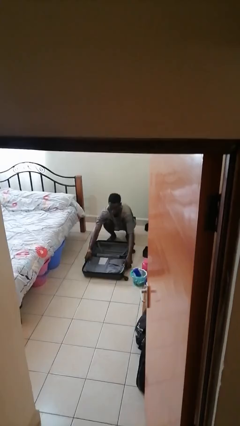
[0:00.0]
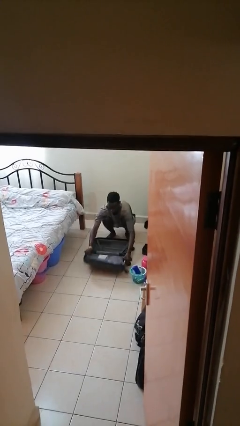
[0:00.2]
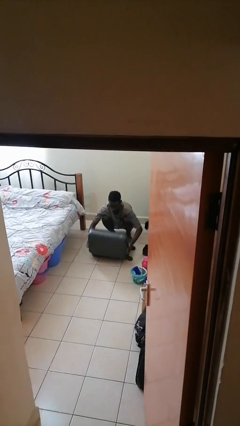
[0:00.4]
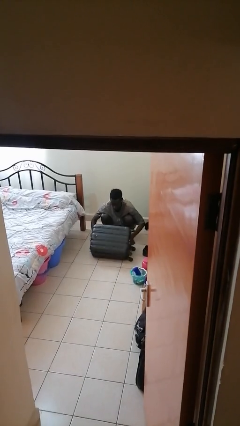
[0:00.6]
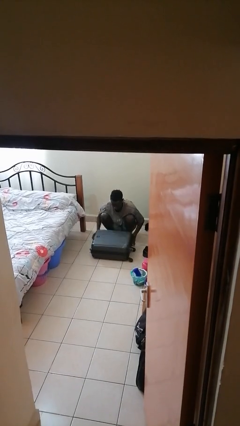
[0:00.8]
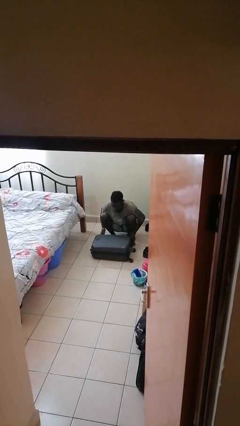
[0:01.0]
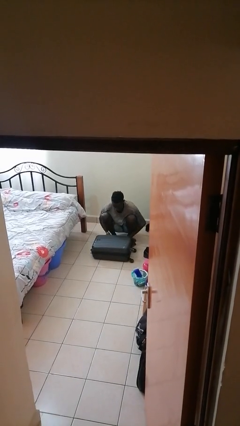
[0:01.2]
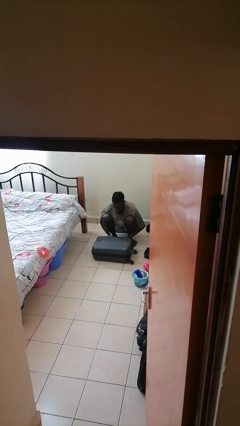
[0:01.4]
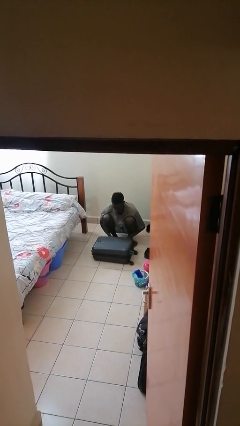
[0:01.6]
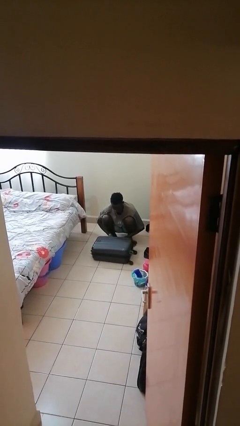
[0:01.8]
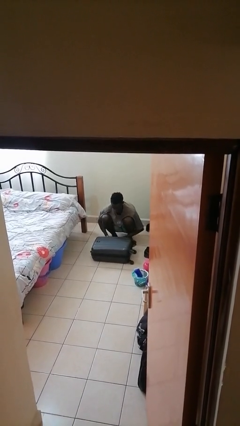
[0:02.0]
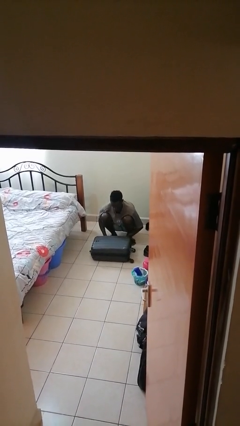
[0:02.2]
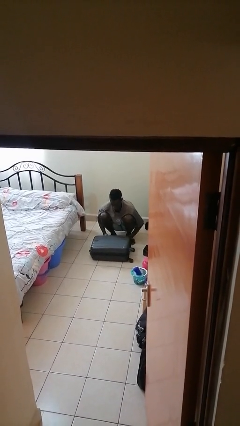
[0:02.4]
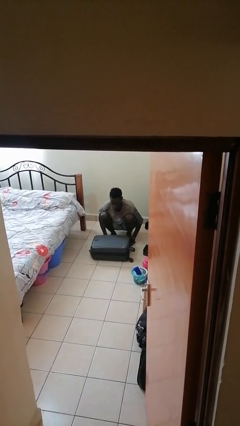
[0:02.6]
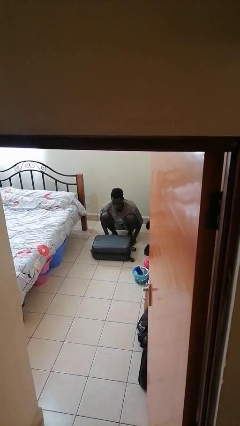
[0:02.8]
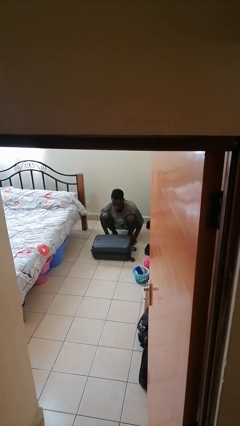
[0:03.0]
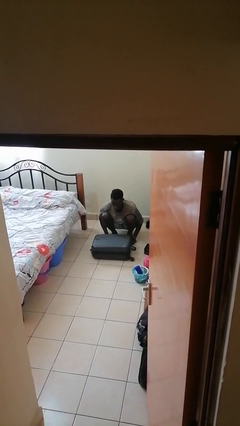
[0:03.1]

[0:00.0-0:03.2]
person closes suitcase

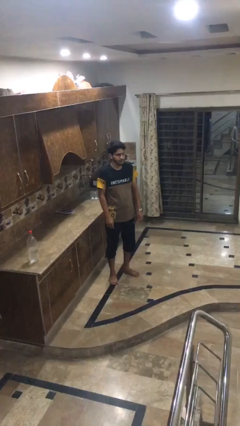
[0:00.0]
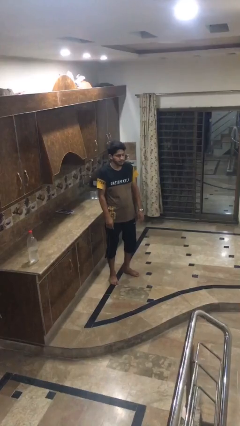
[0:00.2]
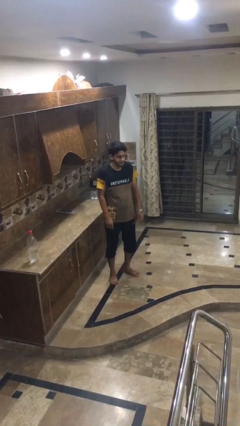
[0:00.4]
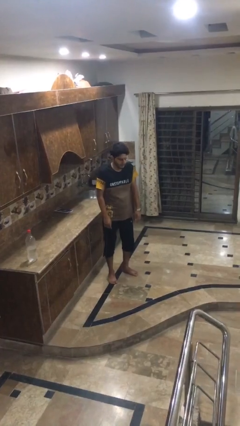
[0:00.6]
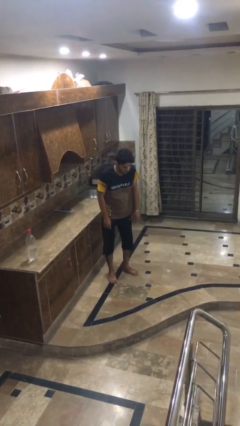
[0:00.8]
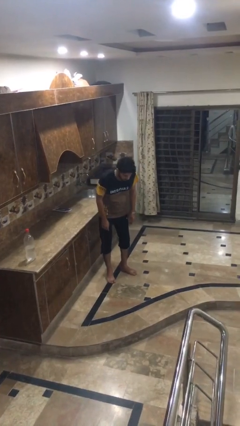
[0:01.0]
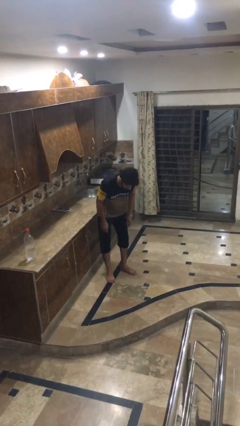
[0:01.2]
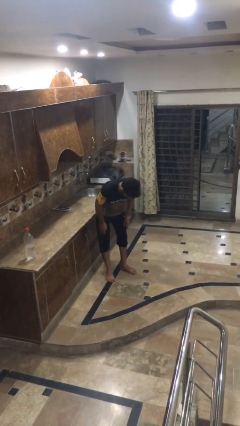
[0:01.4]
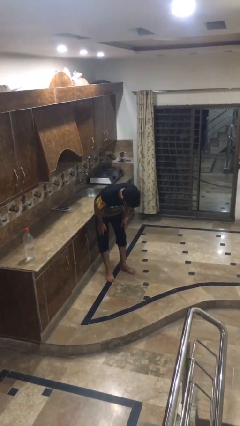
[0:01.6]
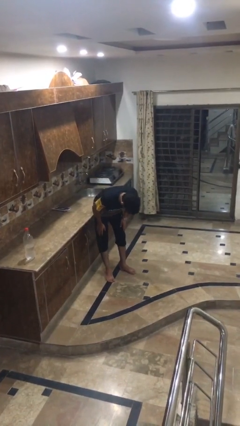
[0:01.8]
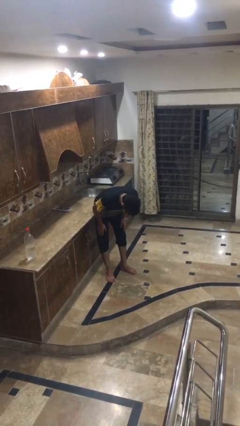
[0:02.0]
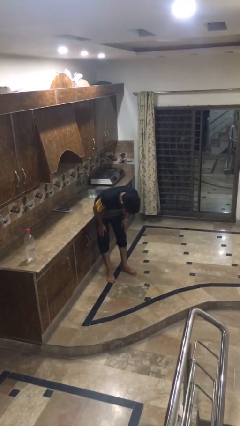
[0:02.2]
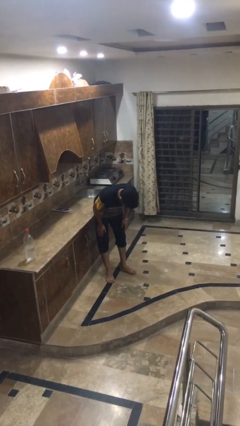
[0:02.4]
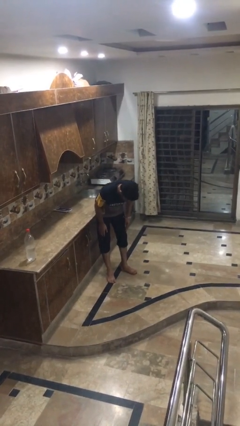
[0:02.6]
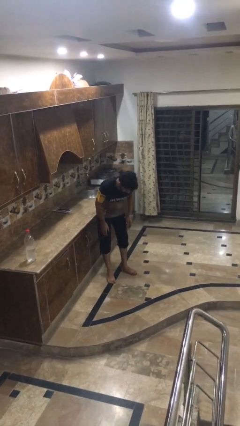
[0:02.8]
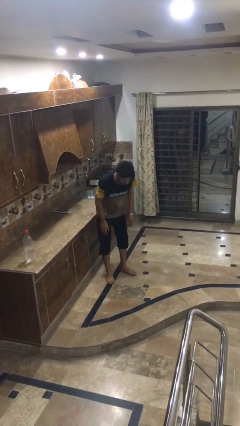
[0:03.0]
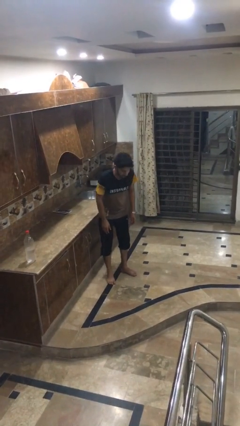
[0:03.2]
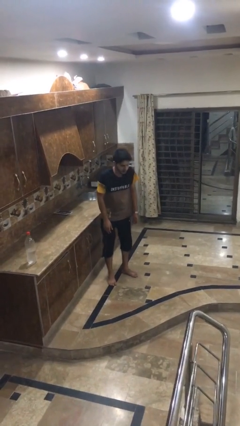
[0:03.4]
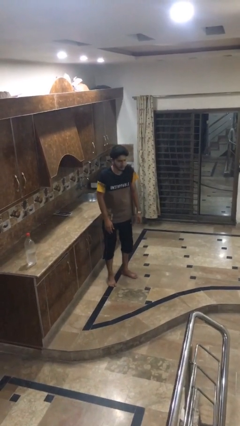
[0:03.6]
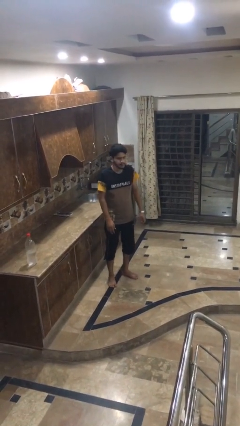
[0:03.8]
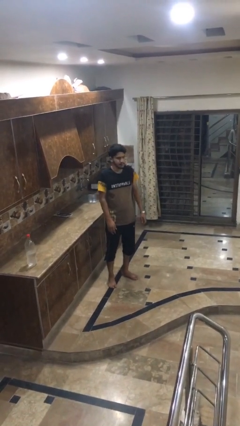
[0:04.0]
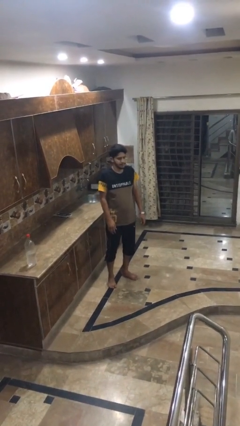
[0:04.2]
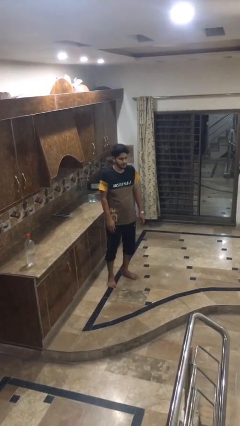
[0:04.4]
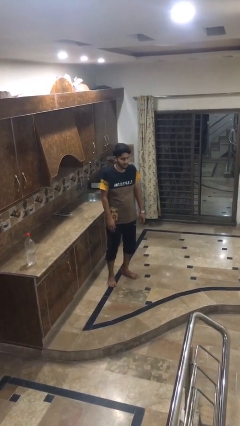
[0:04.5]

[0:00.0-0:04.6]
person bows

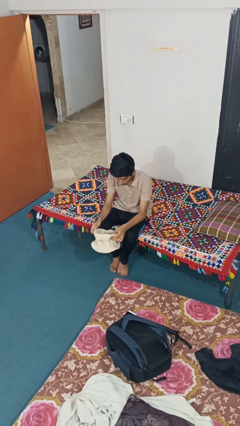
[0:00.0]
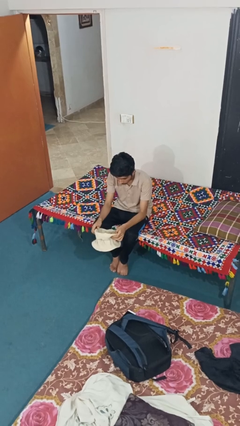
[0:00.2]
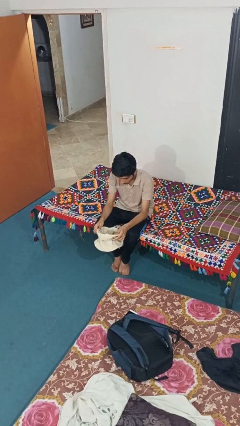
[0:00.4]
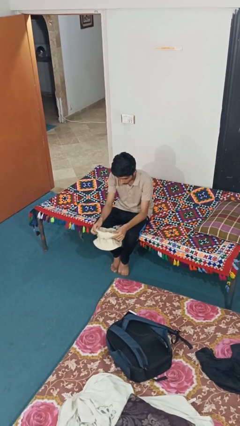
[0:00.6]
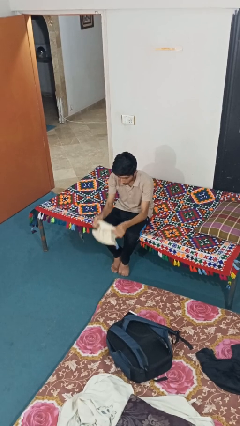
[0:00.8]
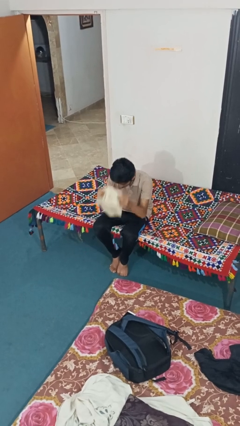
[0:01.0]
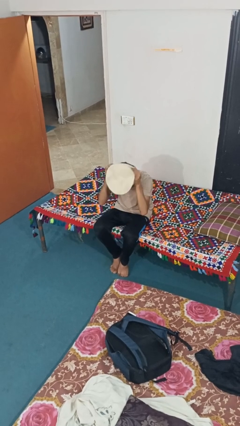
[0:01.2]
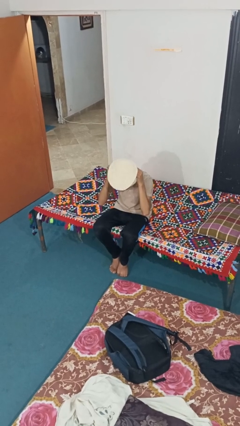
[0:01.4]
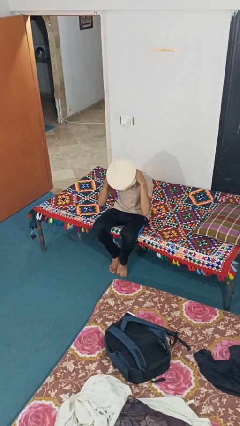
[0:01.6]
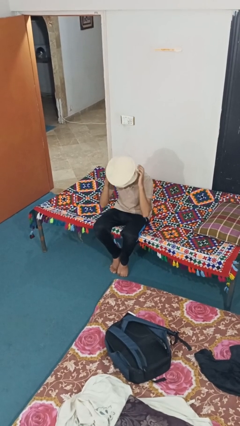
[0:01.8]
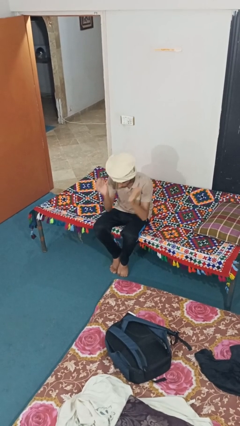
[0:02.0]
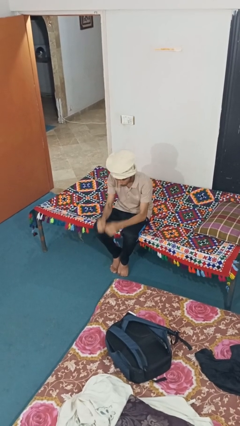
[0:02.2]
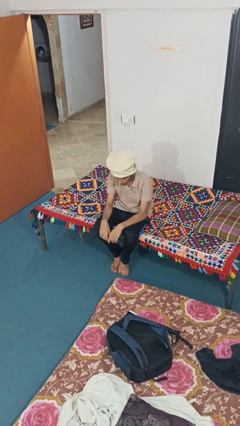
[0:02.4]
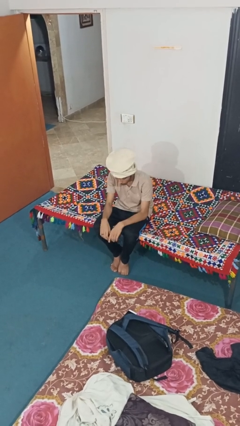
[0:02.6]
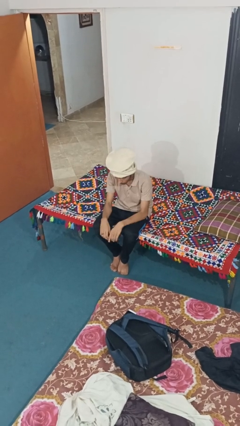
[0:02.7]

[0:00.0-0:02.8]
person puts on hat

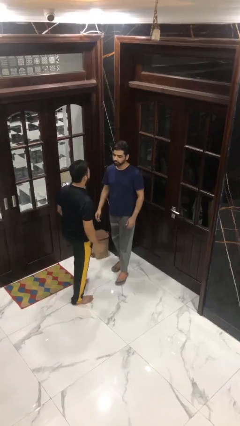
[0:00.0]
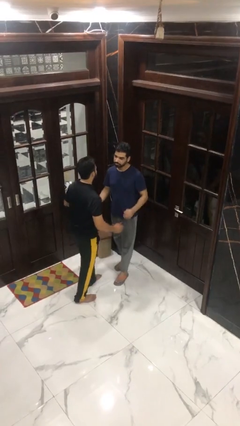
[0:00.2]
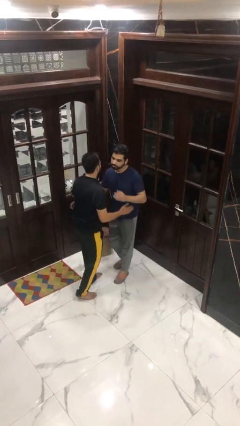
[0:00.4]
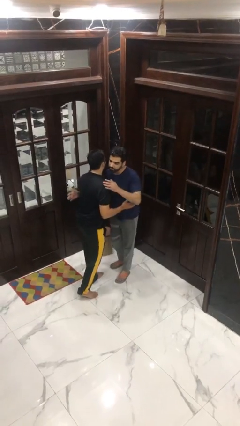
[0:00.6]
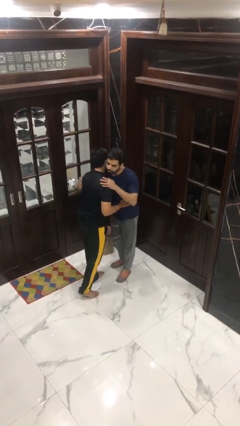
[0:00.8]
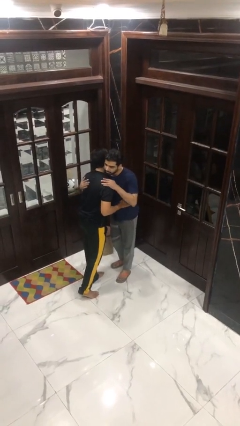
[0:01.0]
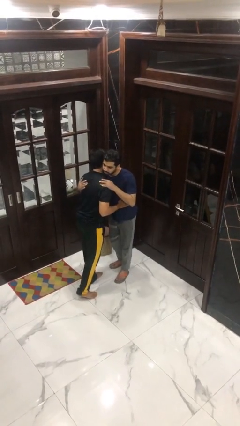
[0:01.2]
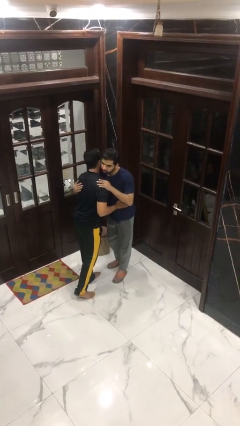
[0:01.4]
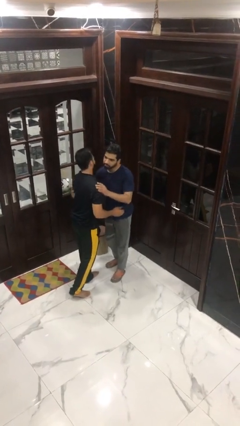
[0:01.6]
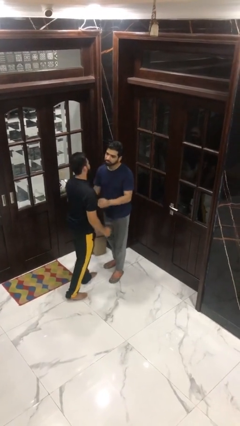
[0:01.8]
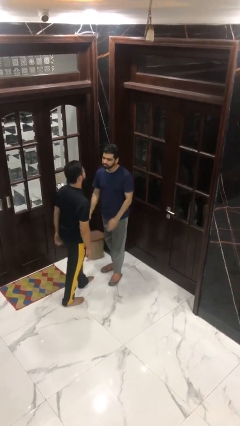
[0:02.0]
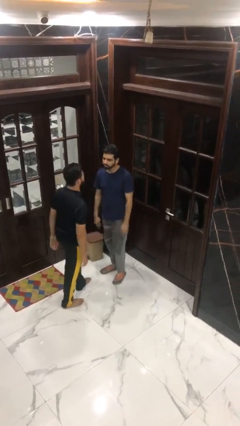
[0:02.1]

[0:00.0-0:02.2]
person embraces person

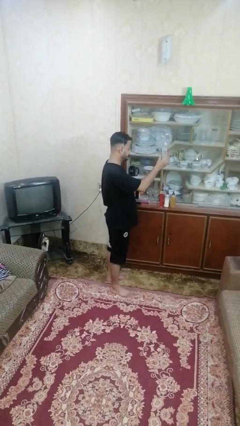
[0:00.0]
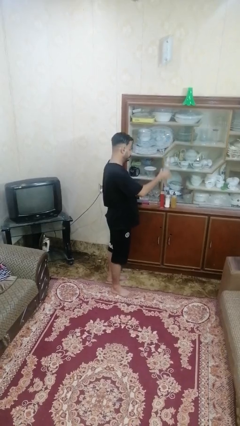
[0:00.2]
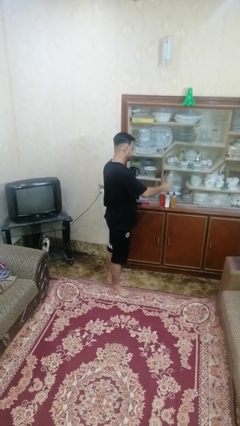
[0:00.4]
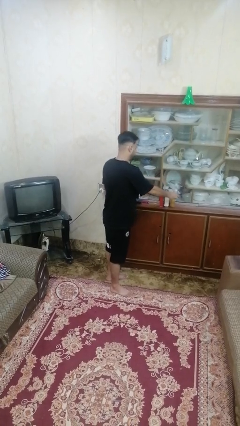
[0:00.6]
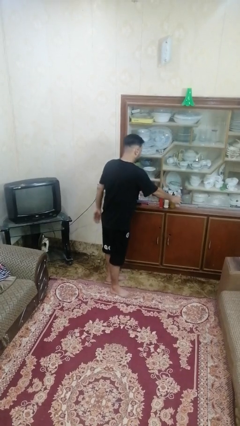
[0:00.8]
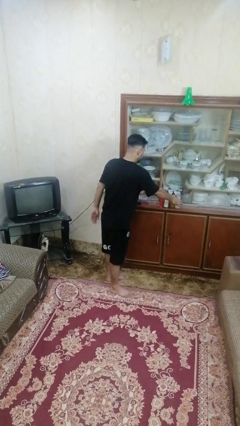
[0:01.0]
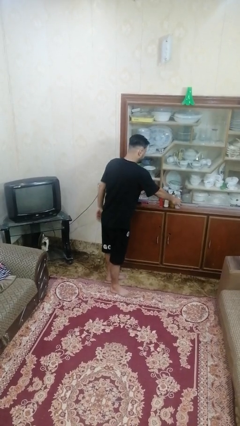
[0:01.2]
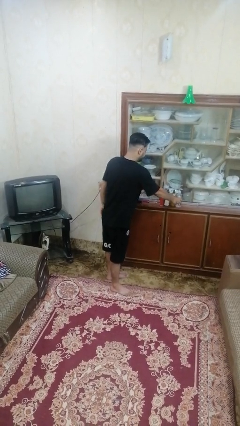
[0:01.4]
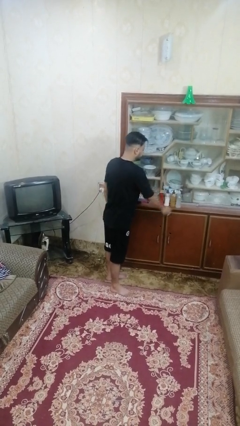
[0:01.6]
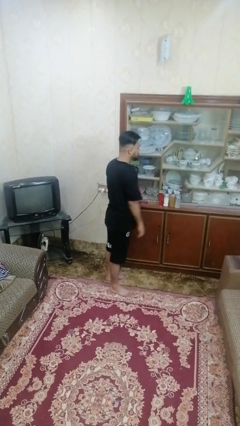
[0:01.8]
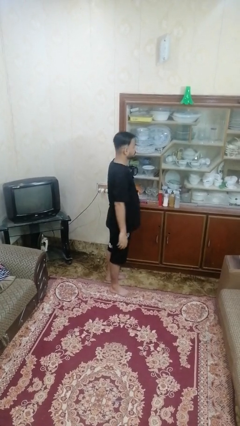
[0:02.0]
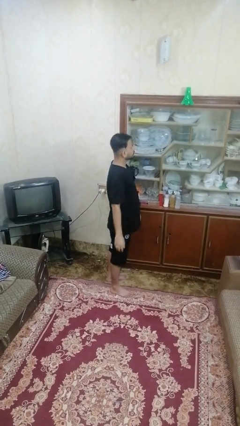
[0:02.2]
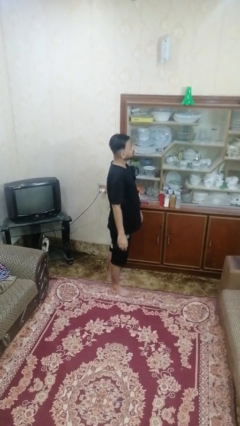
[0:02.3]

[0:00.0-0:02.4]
person puts down object on shelf

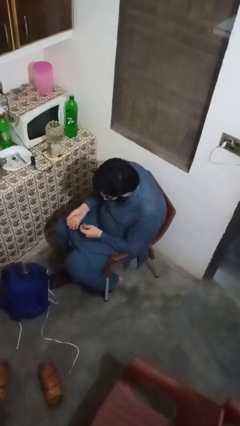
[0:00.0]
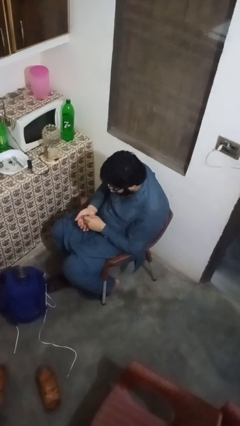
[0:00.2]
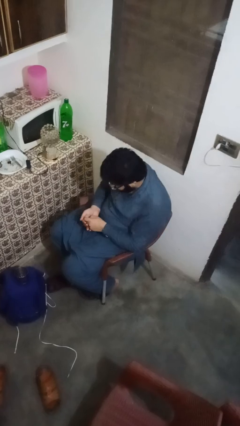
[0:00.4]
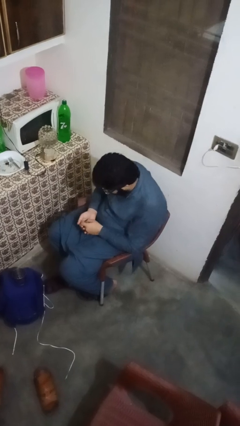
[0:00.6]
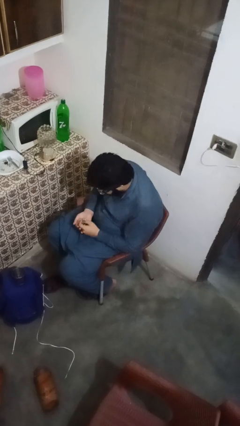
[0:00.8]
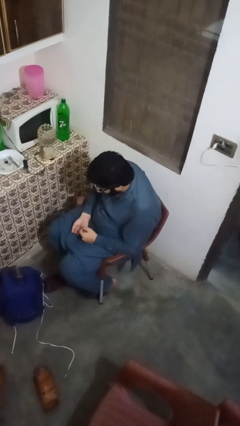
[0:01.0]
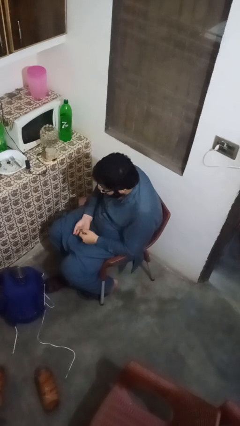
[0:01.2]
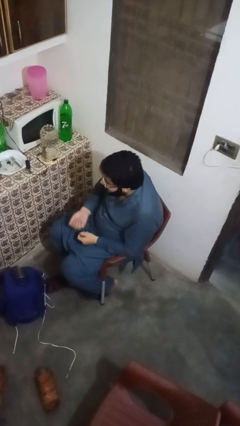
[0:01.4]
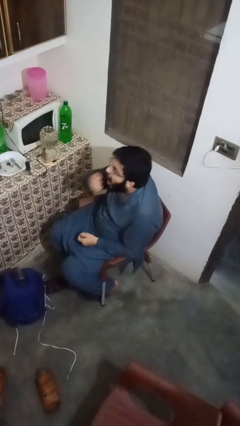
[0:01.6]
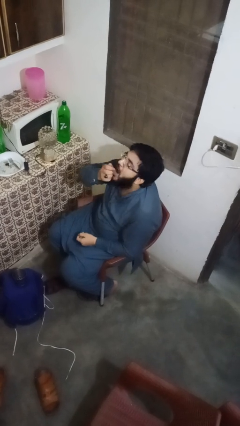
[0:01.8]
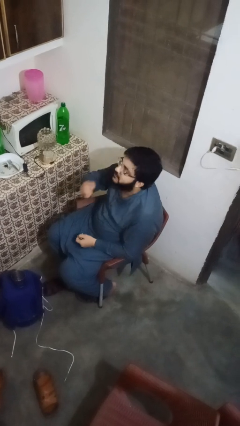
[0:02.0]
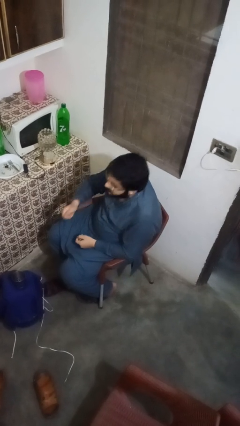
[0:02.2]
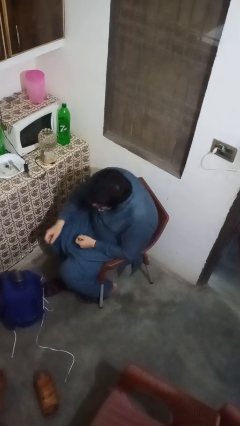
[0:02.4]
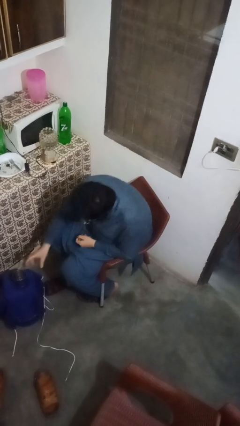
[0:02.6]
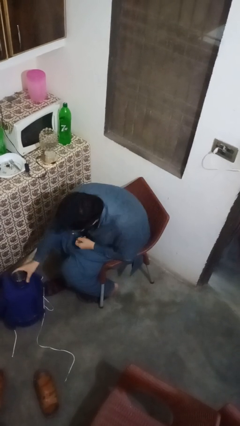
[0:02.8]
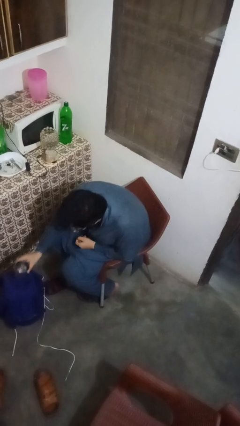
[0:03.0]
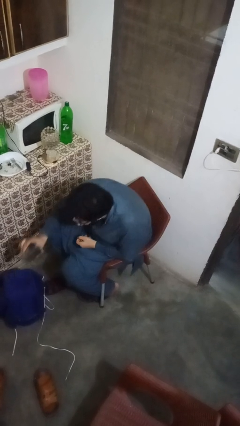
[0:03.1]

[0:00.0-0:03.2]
person takes medicine pills
